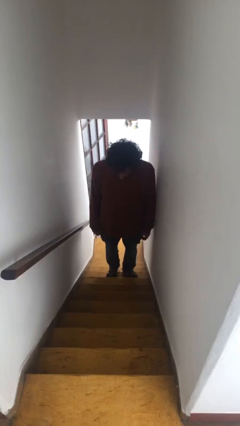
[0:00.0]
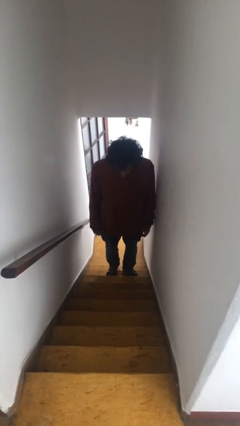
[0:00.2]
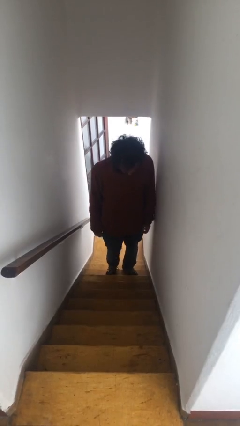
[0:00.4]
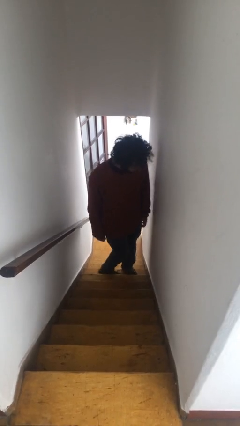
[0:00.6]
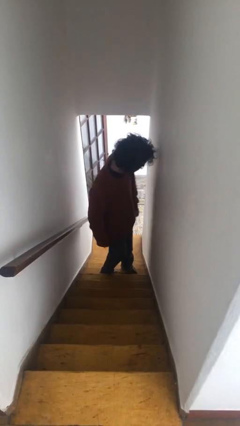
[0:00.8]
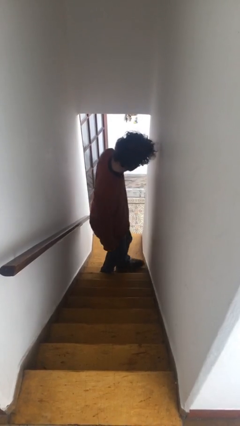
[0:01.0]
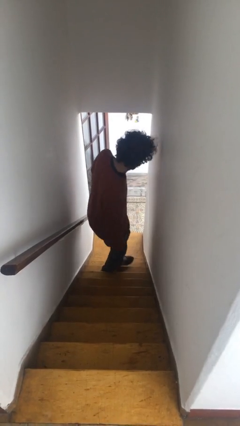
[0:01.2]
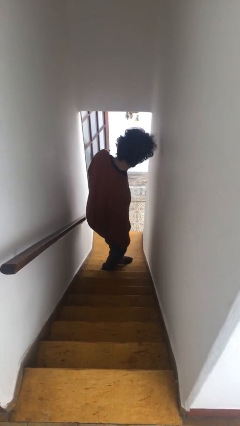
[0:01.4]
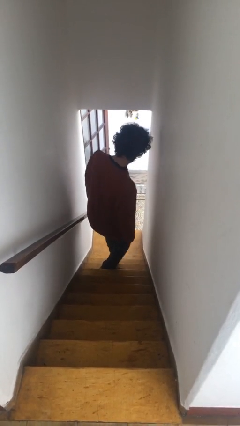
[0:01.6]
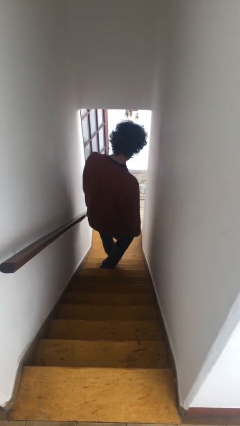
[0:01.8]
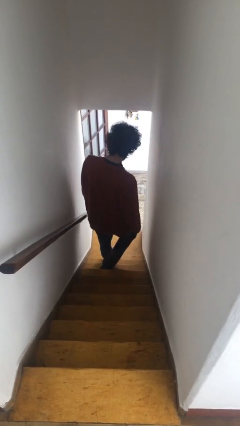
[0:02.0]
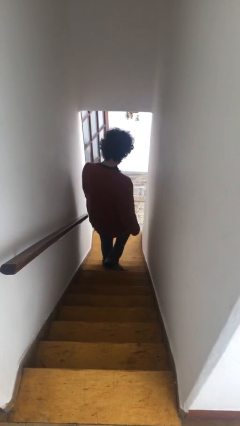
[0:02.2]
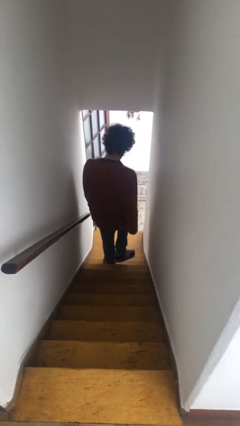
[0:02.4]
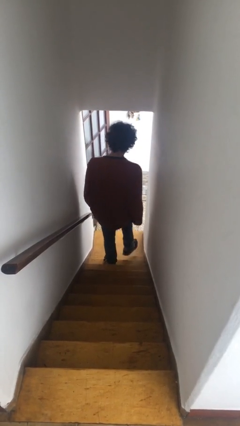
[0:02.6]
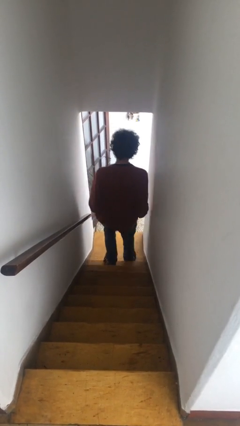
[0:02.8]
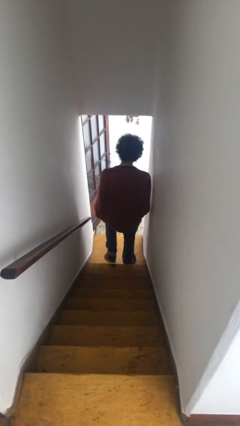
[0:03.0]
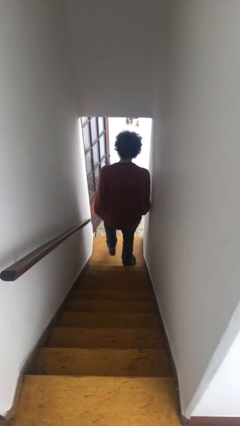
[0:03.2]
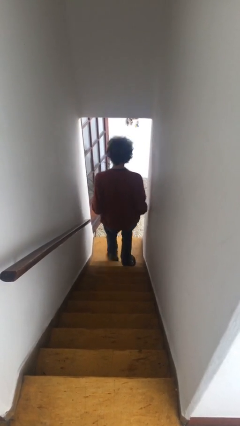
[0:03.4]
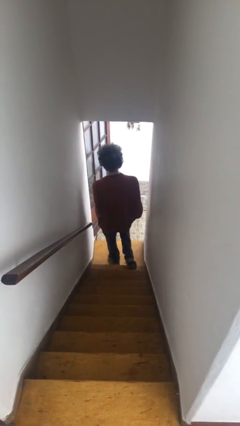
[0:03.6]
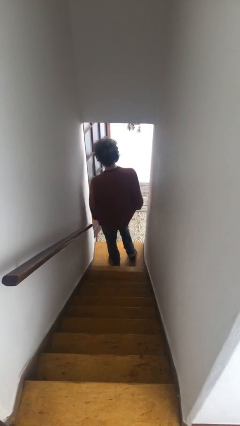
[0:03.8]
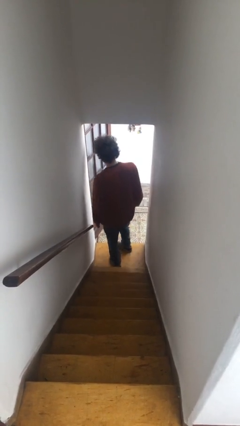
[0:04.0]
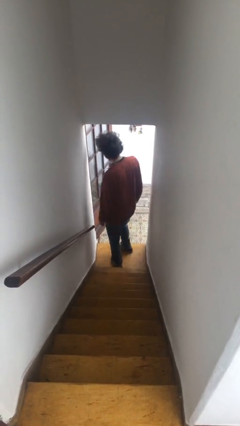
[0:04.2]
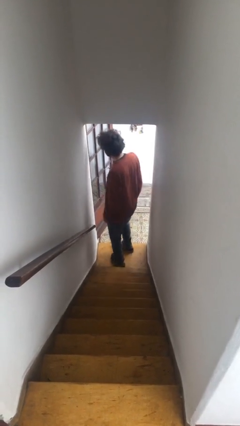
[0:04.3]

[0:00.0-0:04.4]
person climbs down stairs

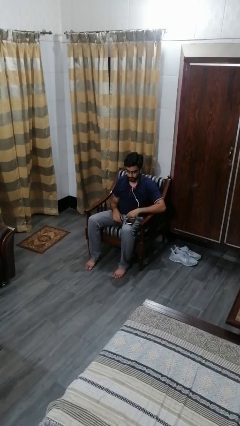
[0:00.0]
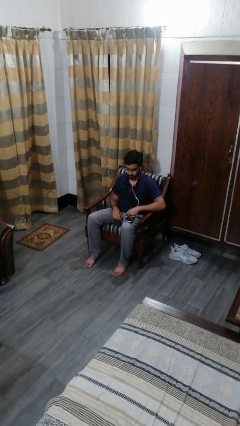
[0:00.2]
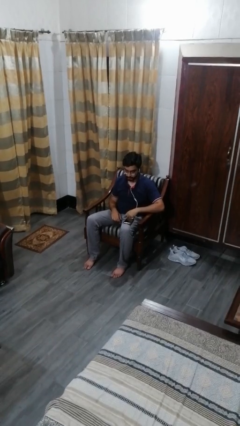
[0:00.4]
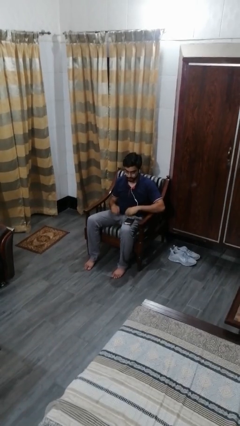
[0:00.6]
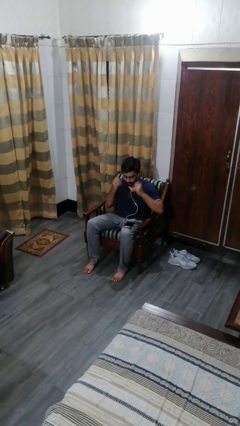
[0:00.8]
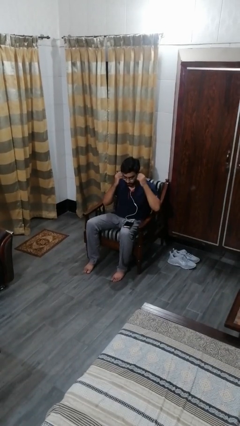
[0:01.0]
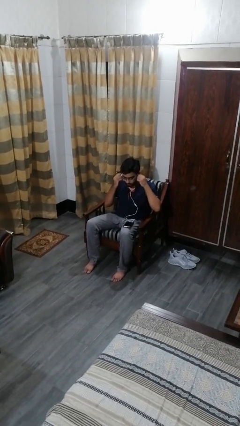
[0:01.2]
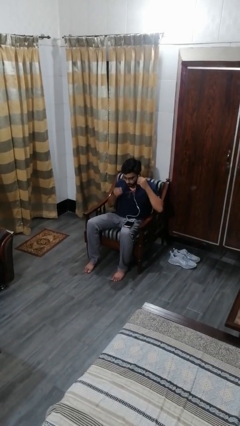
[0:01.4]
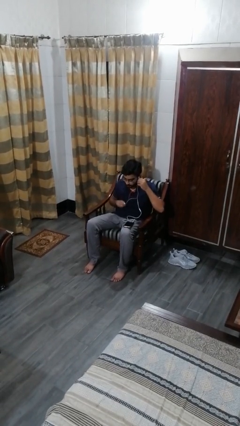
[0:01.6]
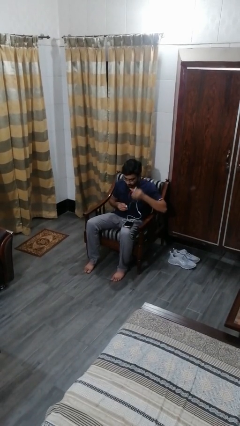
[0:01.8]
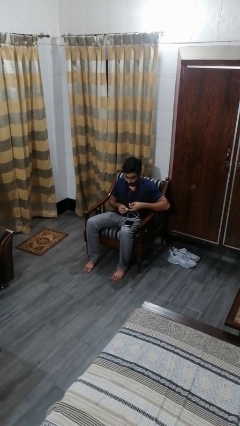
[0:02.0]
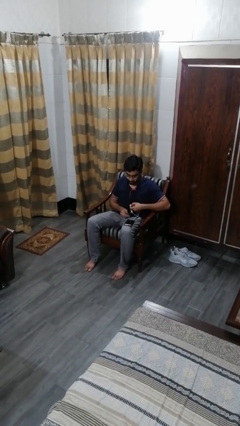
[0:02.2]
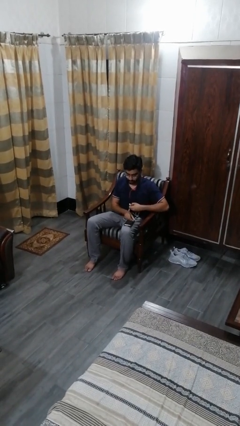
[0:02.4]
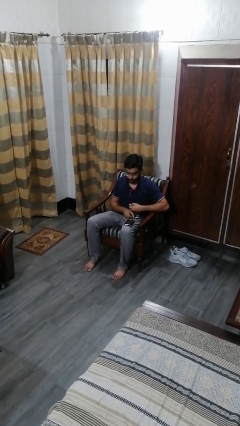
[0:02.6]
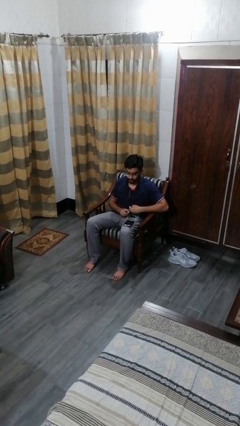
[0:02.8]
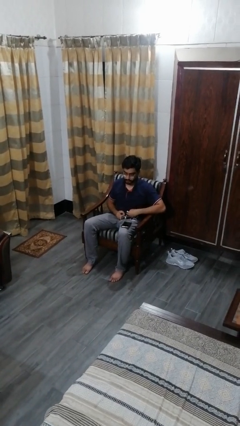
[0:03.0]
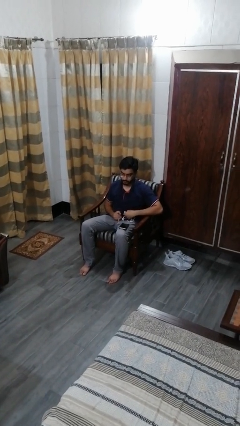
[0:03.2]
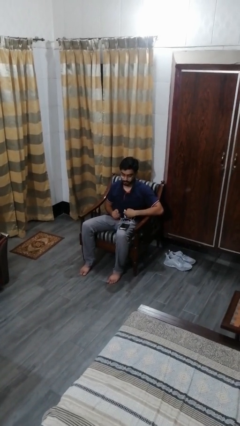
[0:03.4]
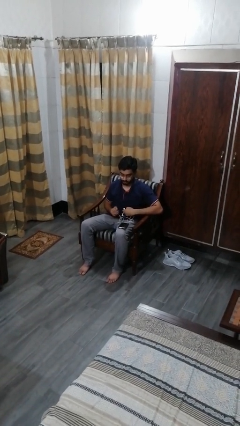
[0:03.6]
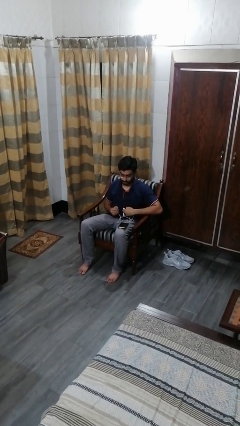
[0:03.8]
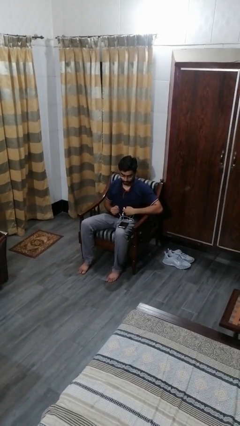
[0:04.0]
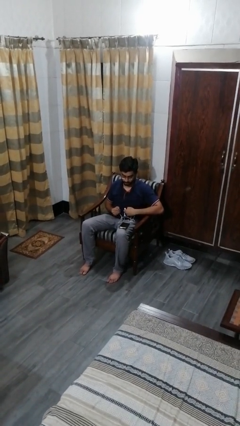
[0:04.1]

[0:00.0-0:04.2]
person takes off headphones

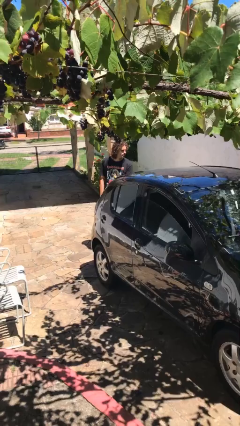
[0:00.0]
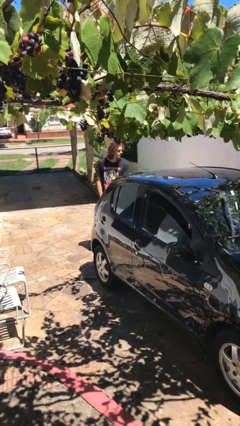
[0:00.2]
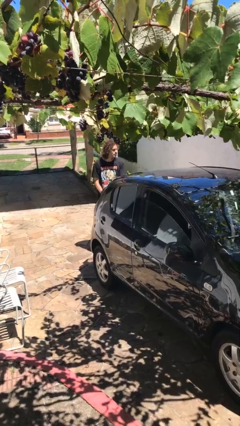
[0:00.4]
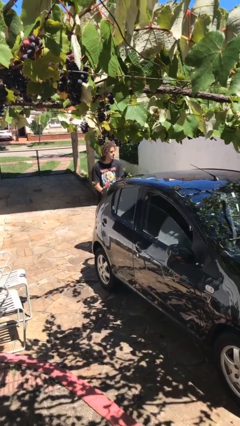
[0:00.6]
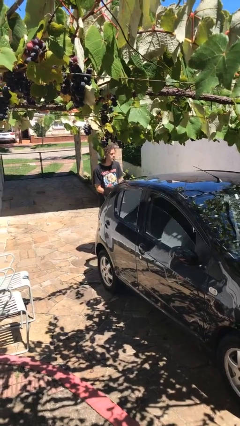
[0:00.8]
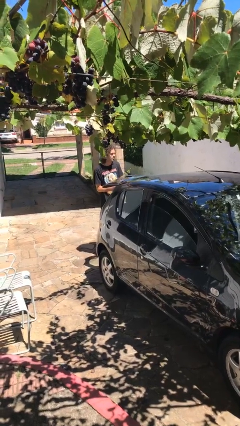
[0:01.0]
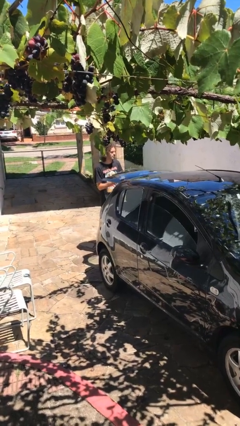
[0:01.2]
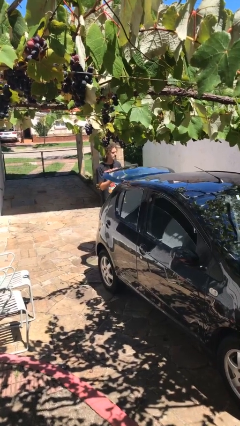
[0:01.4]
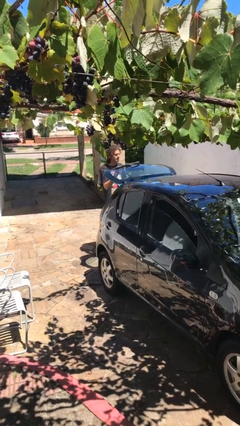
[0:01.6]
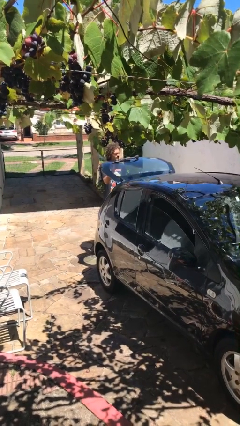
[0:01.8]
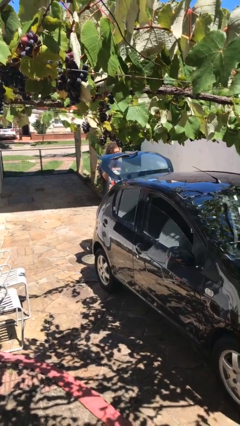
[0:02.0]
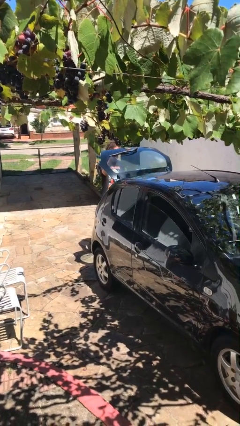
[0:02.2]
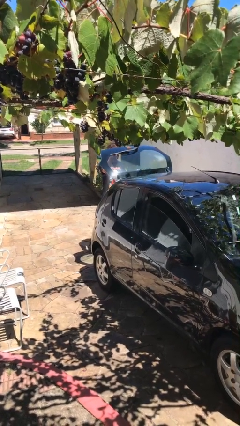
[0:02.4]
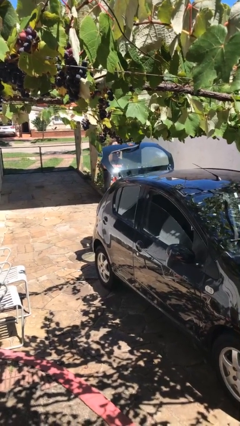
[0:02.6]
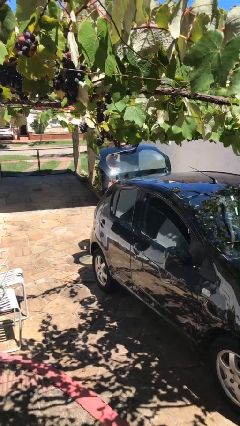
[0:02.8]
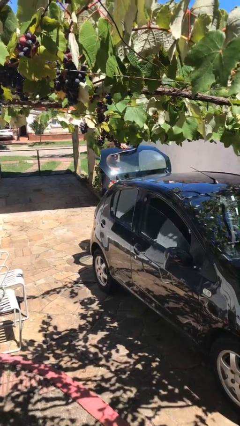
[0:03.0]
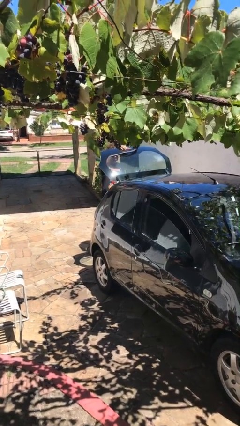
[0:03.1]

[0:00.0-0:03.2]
person opens car trunk

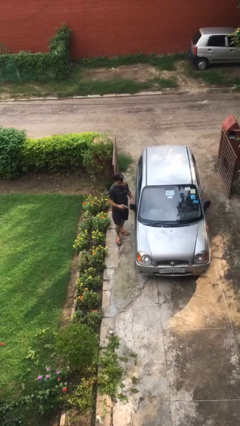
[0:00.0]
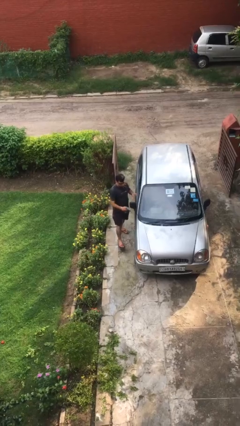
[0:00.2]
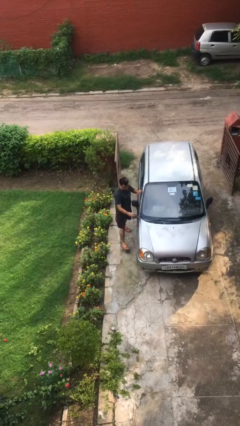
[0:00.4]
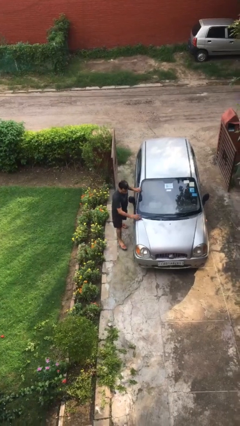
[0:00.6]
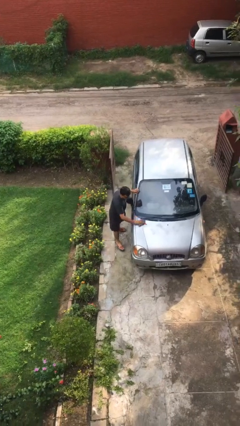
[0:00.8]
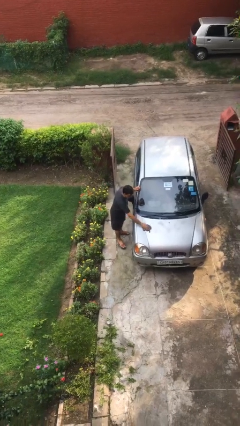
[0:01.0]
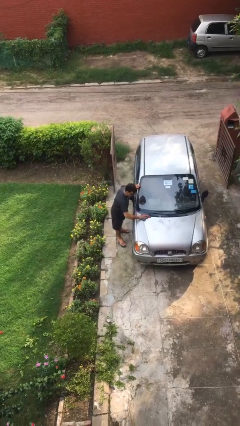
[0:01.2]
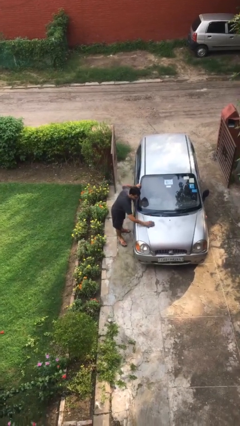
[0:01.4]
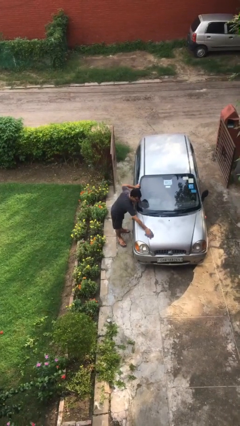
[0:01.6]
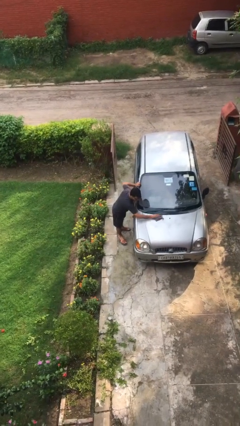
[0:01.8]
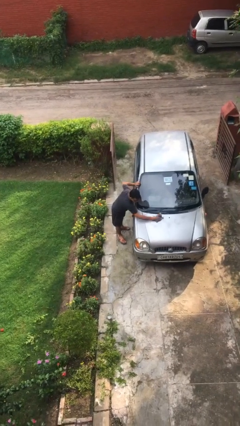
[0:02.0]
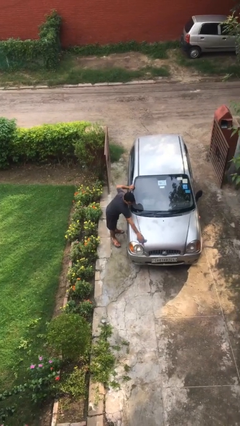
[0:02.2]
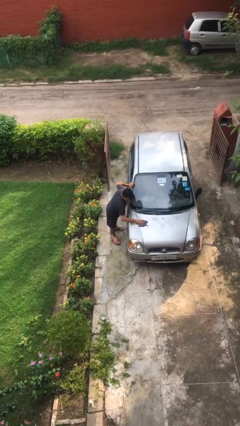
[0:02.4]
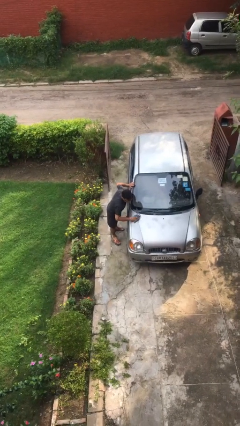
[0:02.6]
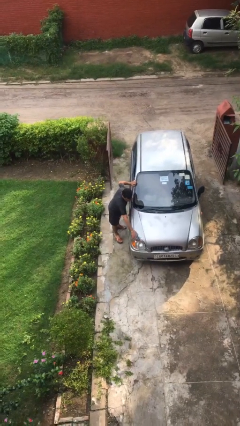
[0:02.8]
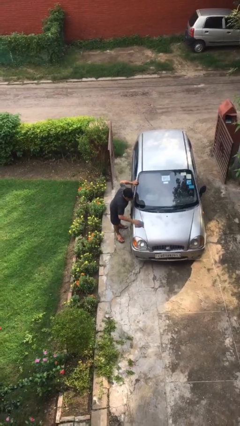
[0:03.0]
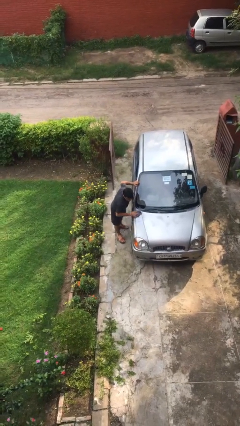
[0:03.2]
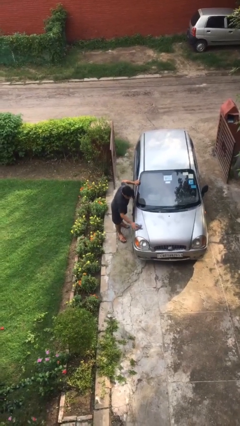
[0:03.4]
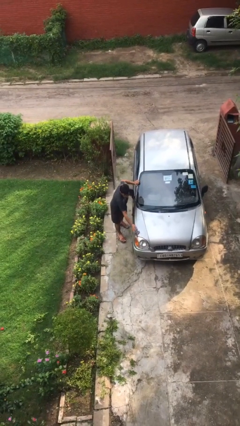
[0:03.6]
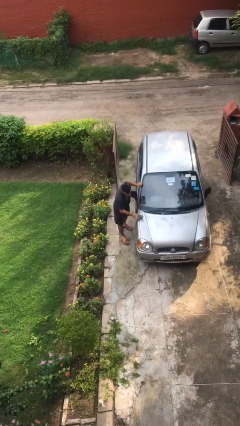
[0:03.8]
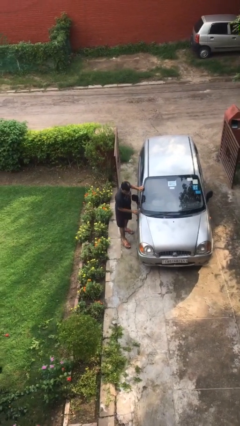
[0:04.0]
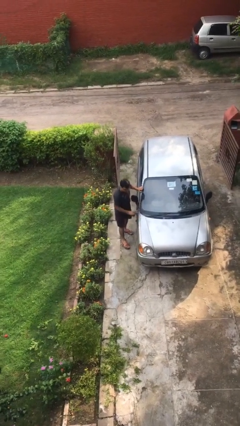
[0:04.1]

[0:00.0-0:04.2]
person polishes car with rag

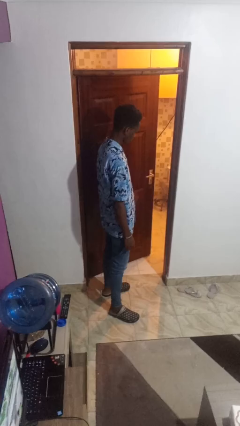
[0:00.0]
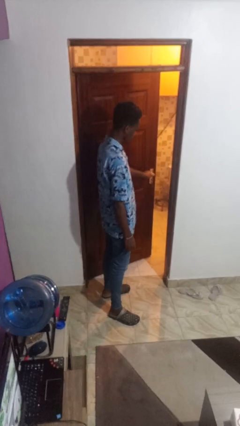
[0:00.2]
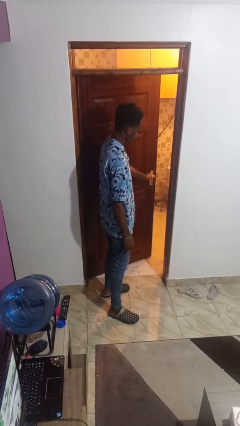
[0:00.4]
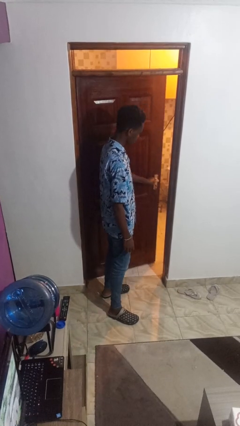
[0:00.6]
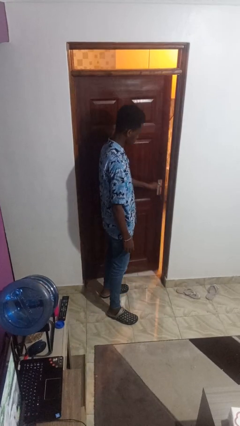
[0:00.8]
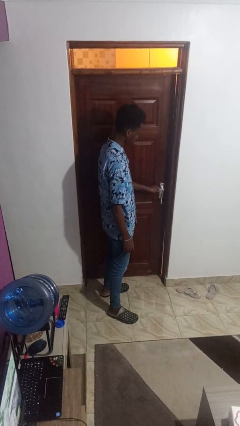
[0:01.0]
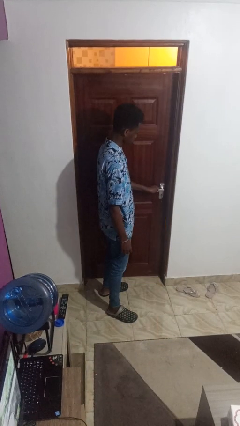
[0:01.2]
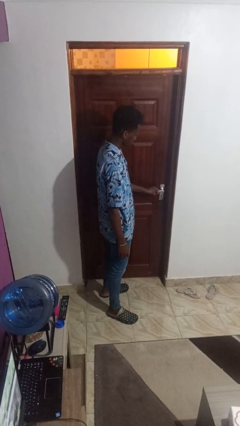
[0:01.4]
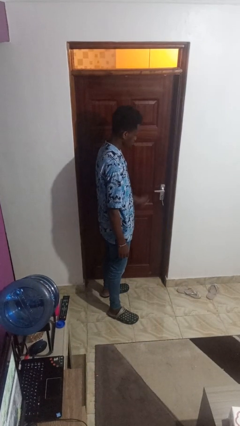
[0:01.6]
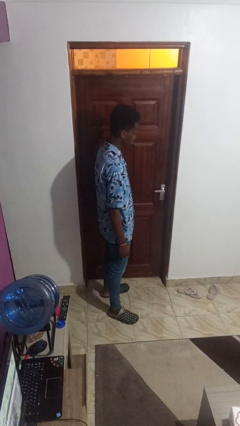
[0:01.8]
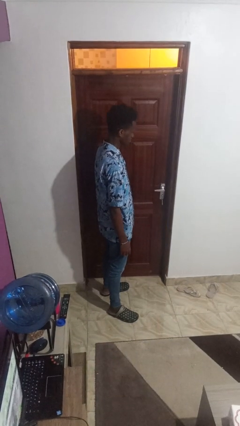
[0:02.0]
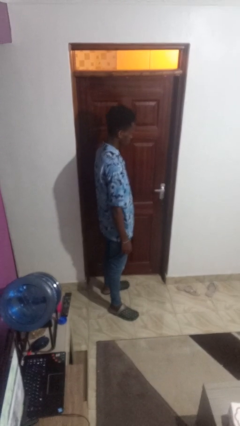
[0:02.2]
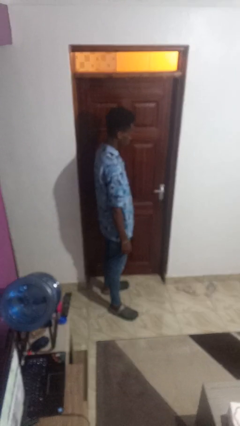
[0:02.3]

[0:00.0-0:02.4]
person closes facility door
